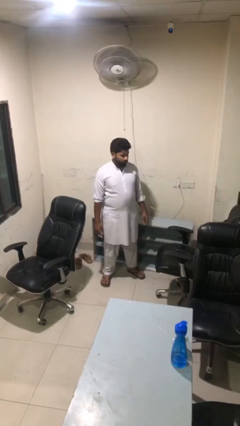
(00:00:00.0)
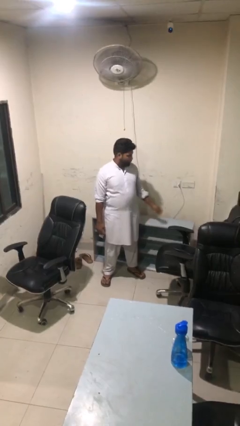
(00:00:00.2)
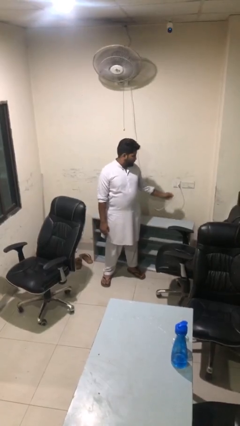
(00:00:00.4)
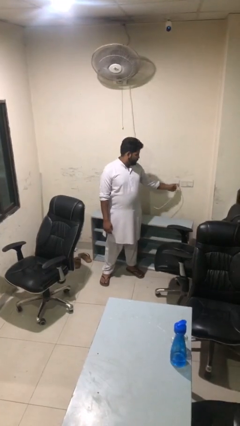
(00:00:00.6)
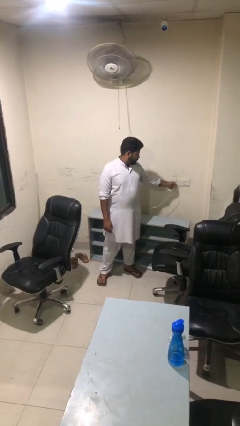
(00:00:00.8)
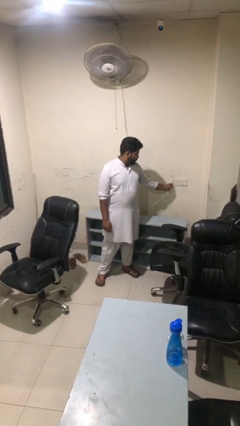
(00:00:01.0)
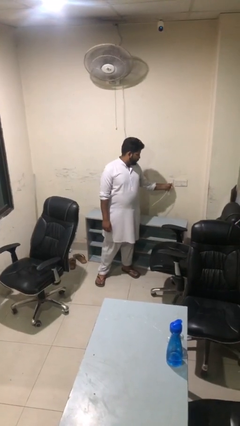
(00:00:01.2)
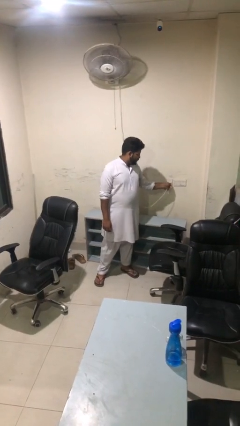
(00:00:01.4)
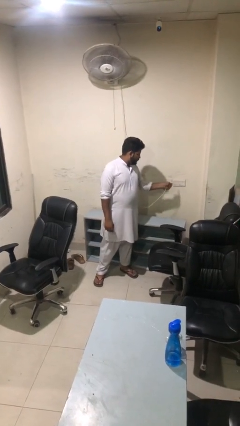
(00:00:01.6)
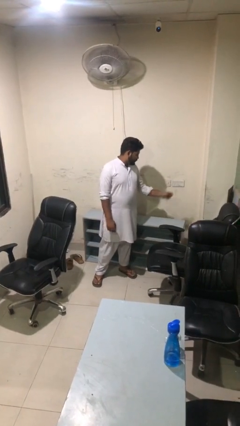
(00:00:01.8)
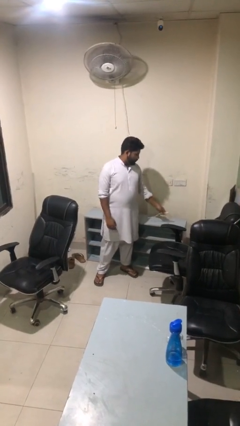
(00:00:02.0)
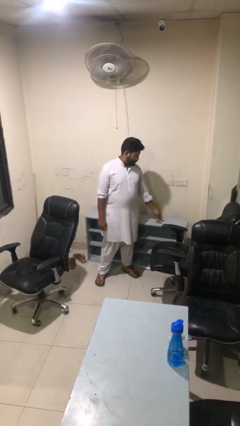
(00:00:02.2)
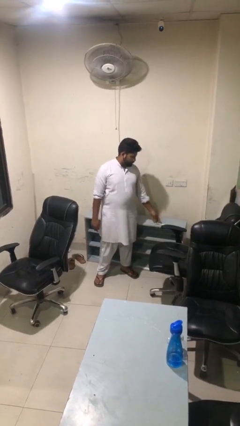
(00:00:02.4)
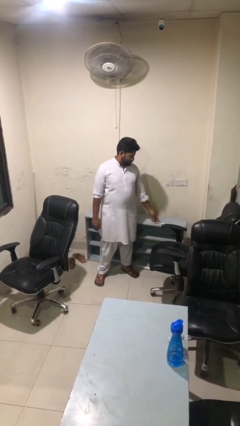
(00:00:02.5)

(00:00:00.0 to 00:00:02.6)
person unplugs from electrical socket

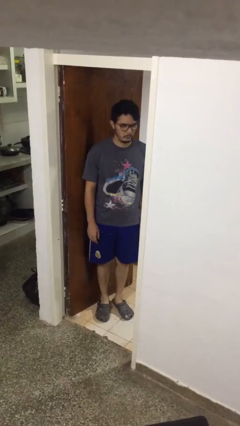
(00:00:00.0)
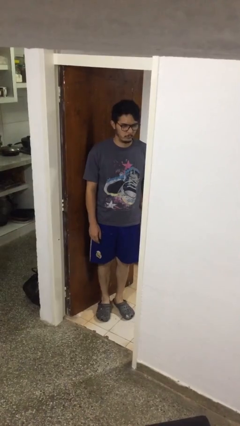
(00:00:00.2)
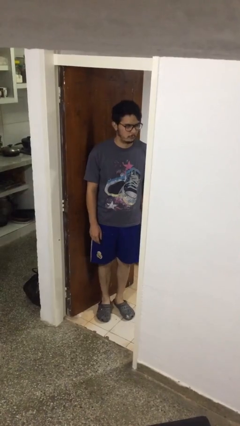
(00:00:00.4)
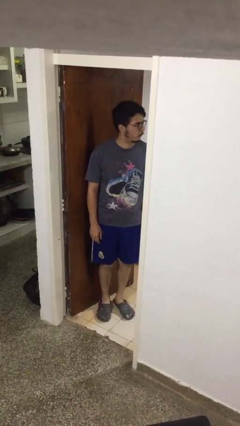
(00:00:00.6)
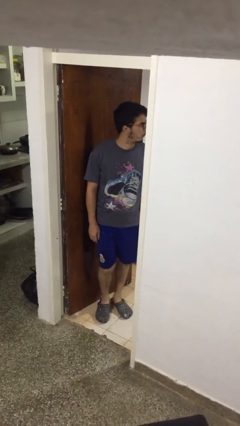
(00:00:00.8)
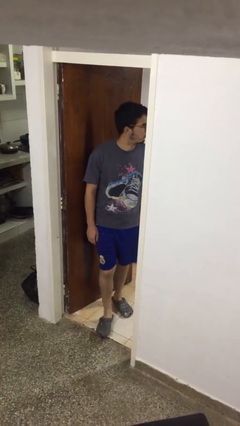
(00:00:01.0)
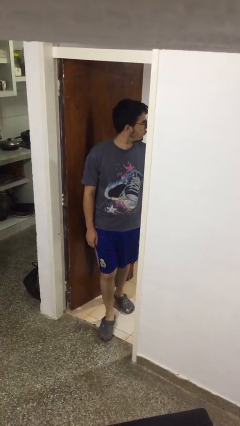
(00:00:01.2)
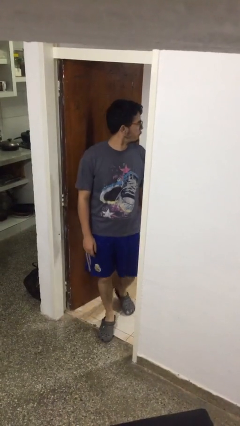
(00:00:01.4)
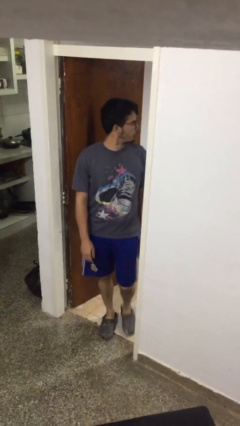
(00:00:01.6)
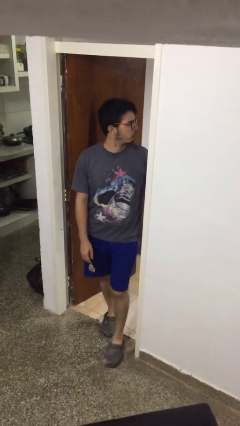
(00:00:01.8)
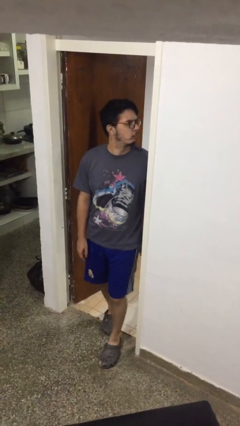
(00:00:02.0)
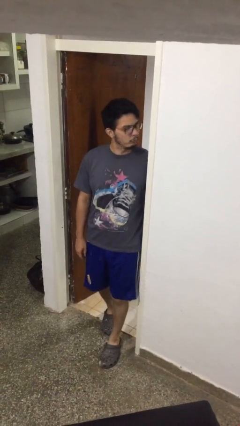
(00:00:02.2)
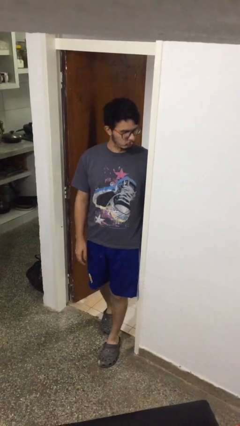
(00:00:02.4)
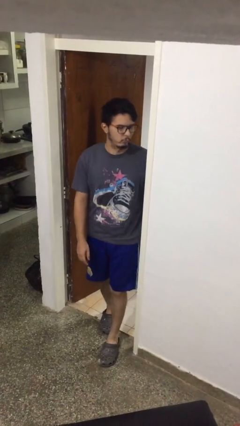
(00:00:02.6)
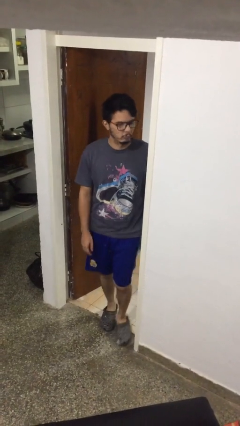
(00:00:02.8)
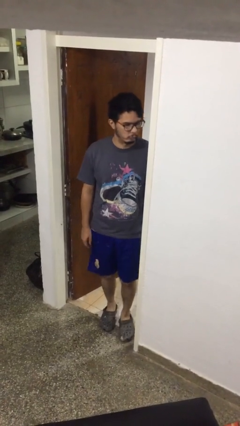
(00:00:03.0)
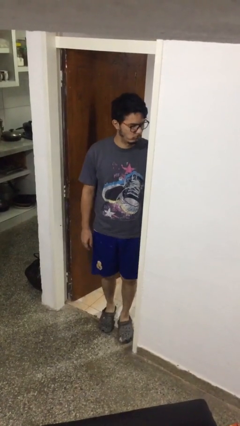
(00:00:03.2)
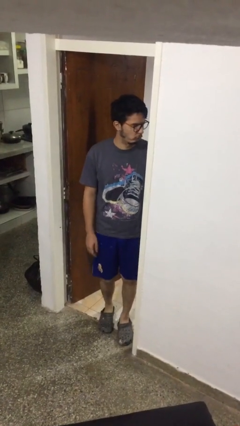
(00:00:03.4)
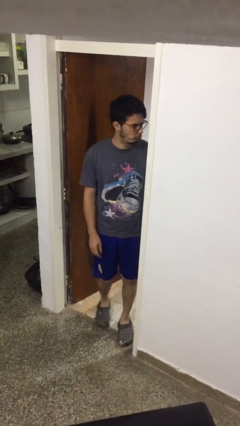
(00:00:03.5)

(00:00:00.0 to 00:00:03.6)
person bumps into wall

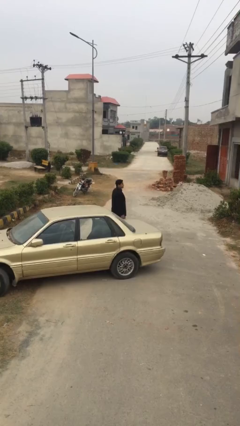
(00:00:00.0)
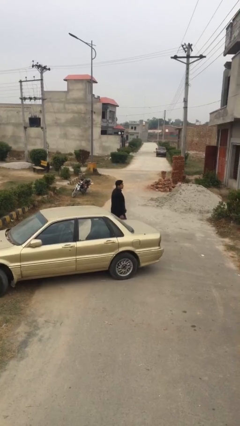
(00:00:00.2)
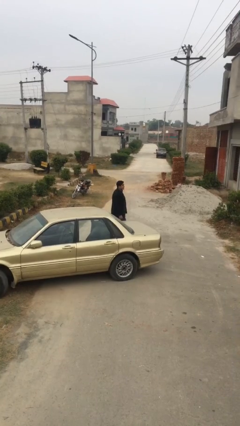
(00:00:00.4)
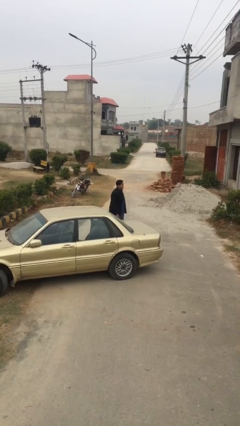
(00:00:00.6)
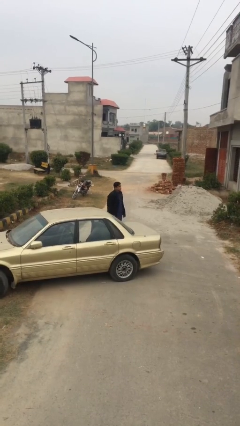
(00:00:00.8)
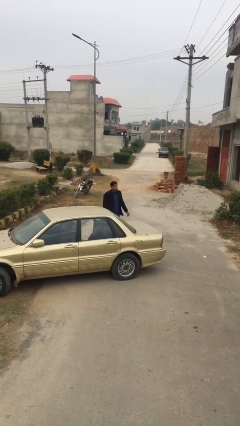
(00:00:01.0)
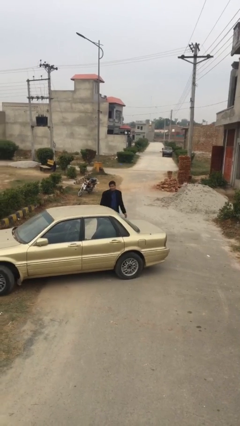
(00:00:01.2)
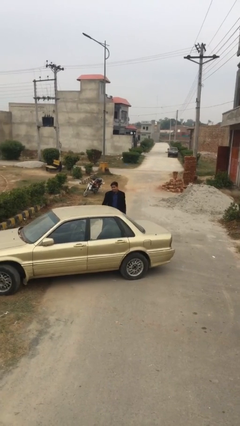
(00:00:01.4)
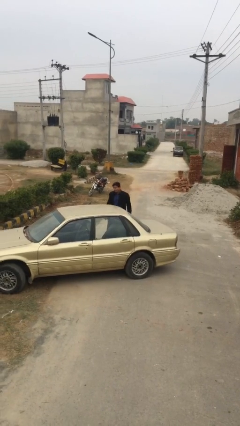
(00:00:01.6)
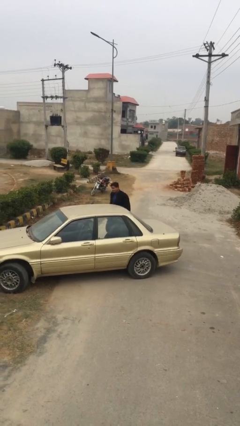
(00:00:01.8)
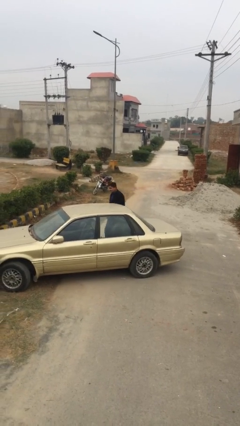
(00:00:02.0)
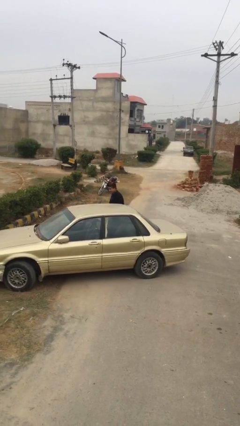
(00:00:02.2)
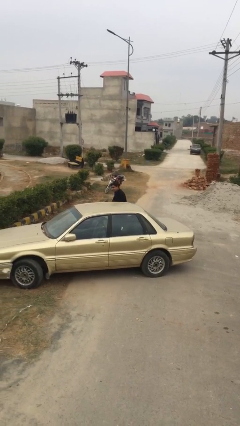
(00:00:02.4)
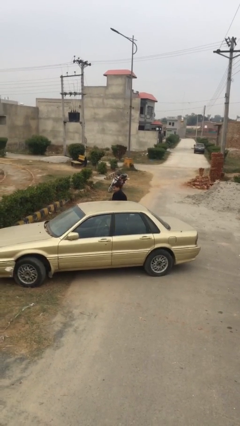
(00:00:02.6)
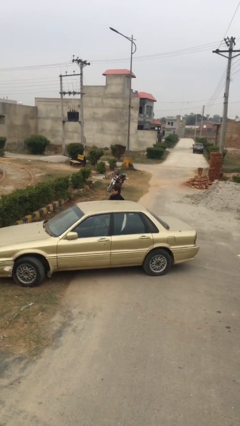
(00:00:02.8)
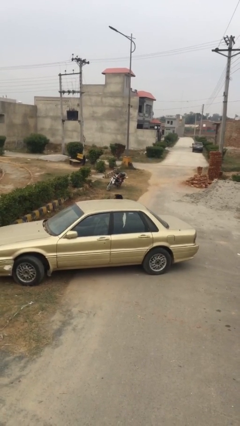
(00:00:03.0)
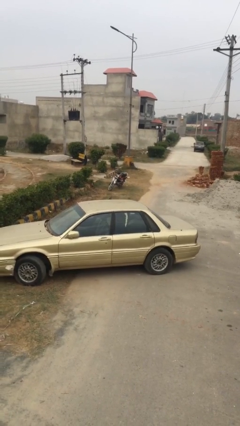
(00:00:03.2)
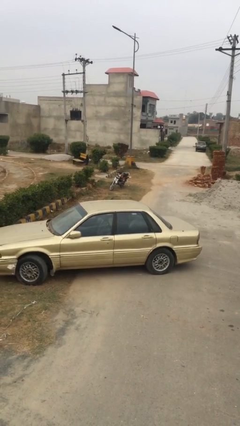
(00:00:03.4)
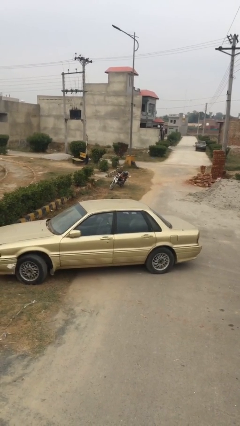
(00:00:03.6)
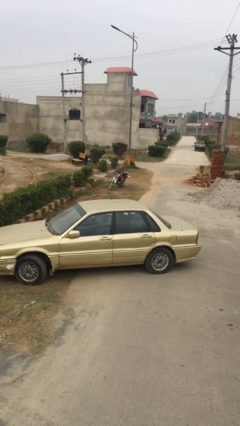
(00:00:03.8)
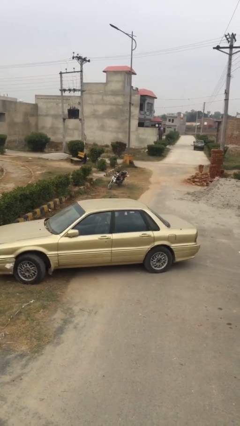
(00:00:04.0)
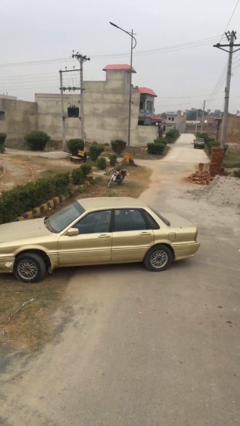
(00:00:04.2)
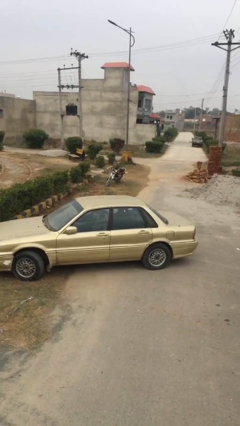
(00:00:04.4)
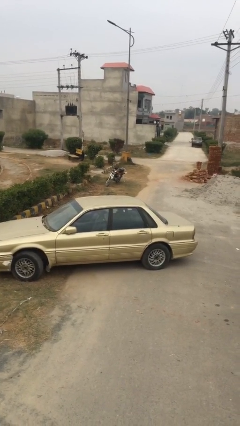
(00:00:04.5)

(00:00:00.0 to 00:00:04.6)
person enters car

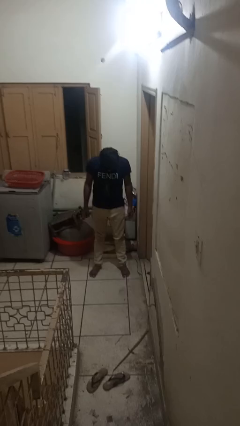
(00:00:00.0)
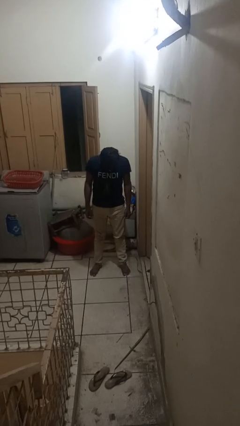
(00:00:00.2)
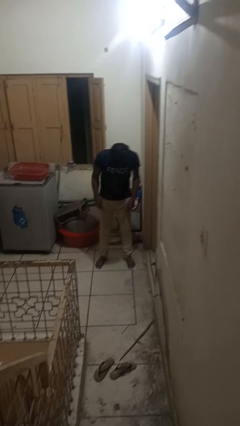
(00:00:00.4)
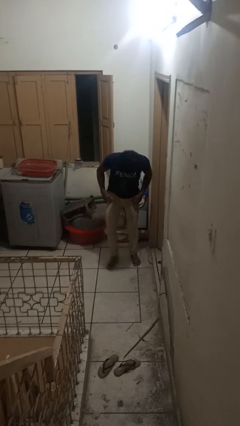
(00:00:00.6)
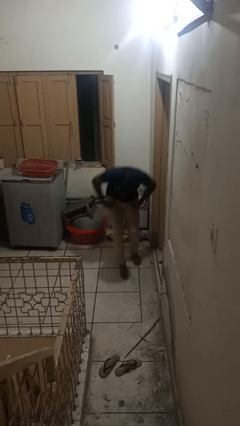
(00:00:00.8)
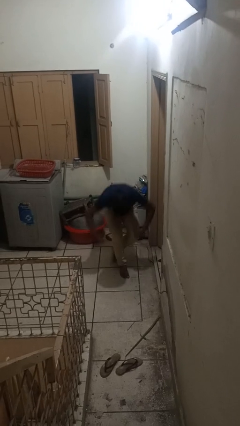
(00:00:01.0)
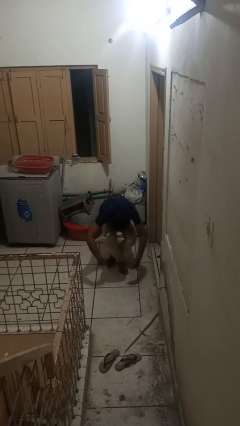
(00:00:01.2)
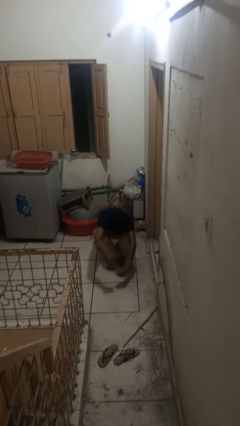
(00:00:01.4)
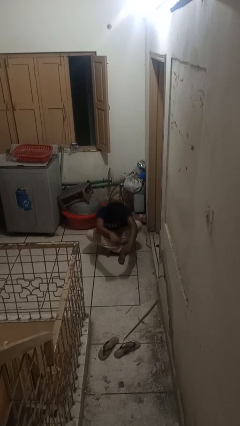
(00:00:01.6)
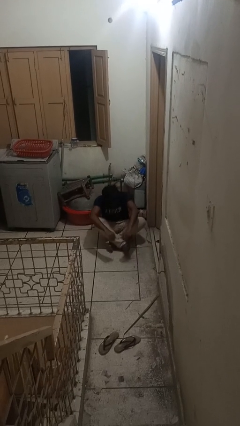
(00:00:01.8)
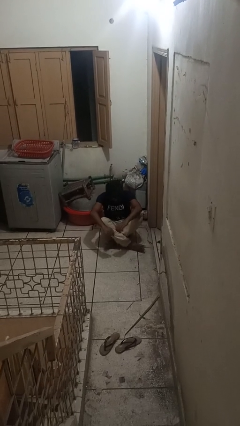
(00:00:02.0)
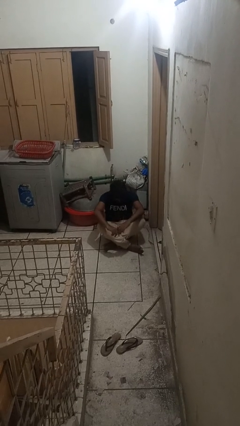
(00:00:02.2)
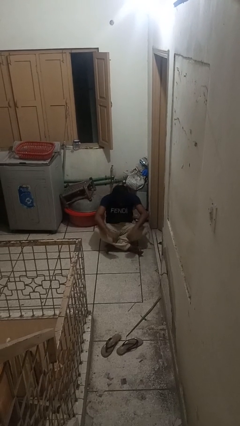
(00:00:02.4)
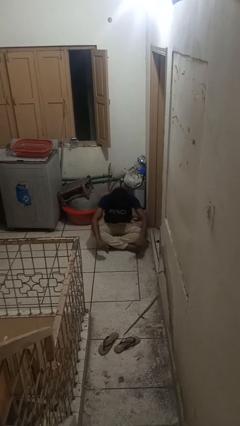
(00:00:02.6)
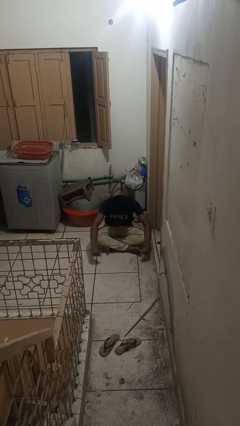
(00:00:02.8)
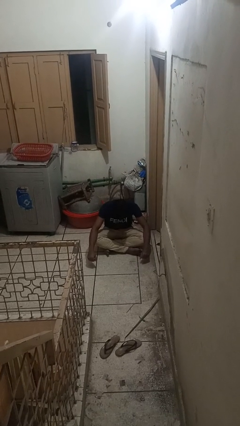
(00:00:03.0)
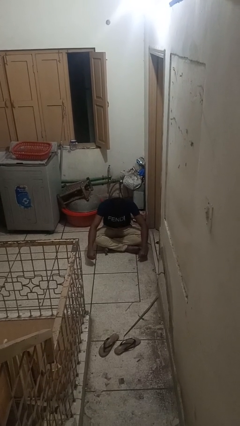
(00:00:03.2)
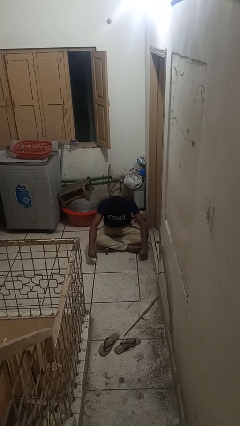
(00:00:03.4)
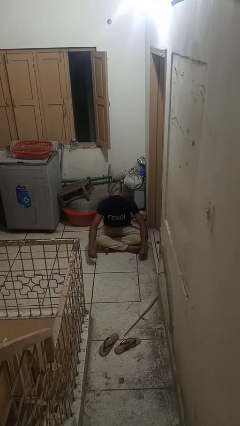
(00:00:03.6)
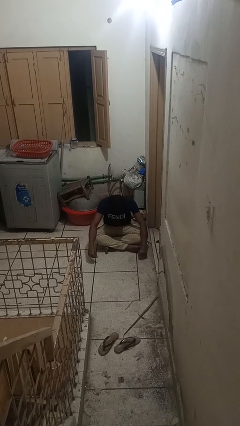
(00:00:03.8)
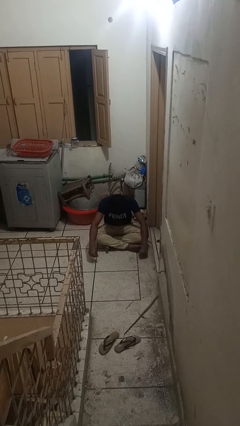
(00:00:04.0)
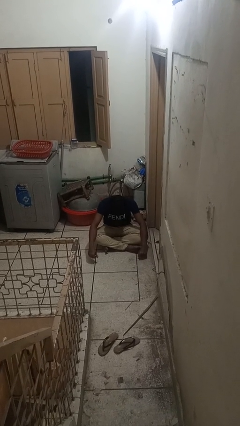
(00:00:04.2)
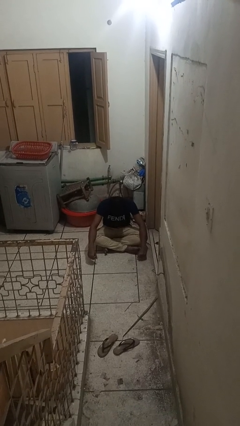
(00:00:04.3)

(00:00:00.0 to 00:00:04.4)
person sits crisscross

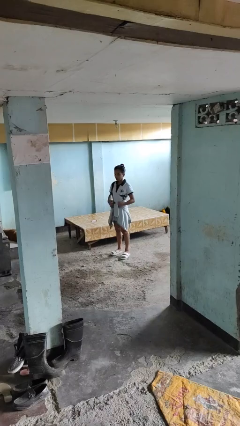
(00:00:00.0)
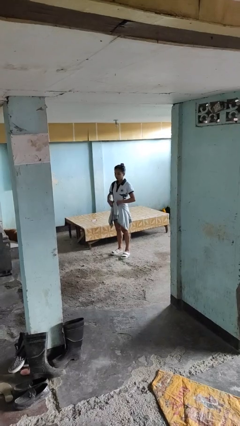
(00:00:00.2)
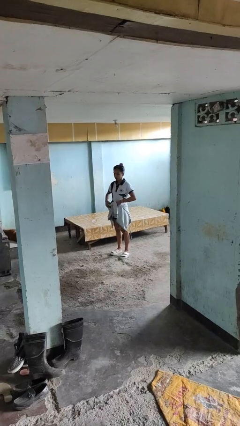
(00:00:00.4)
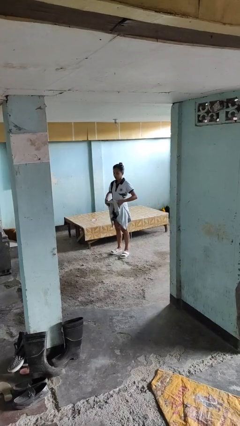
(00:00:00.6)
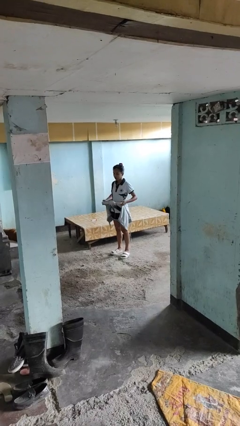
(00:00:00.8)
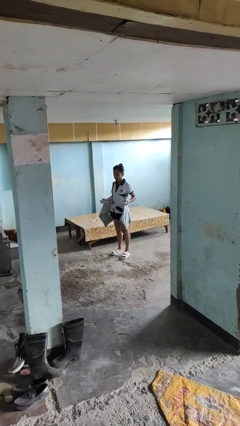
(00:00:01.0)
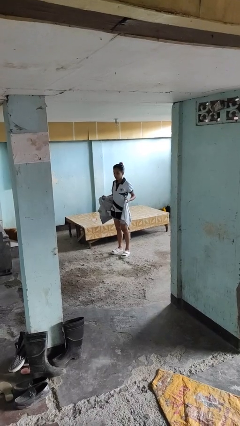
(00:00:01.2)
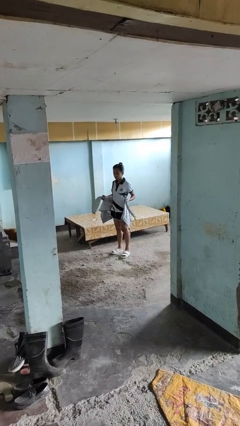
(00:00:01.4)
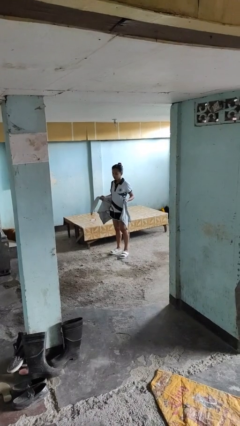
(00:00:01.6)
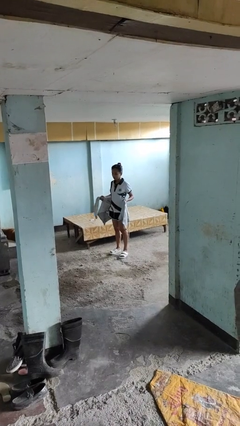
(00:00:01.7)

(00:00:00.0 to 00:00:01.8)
person unties jacket around waist

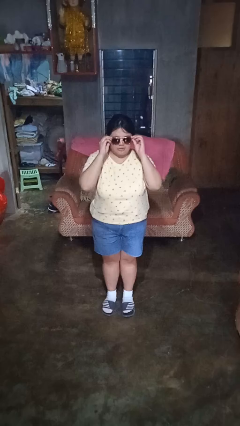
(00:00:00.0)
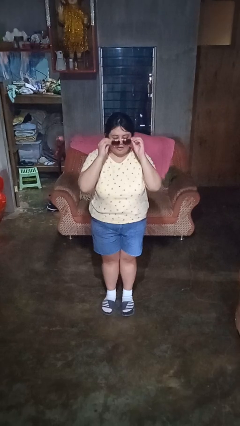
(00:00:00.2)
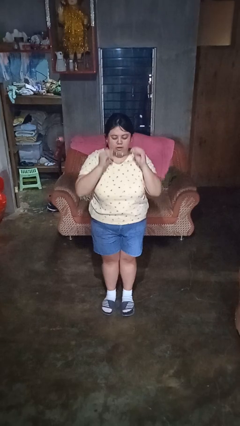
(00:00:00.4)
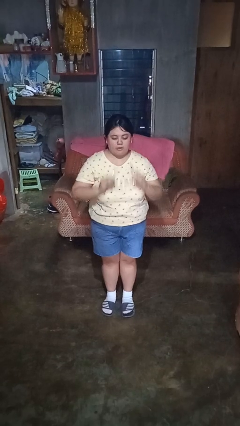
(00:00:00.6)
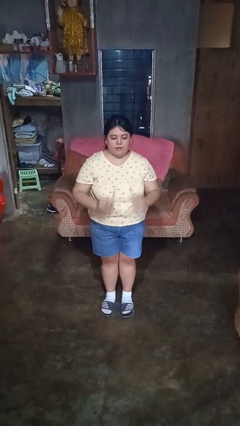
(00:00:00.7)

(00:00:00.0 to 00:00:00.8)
person takes off sunglasses
